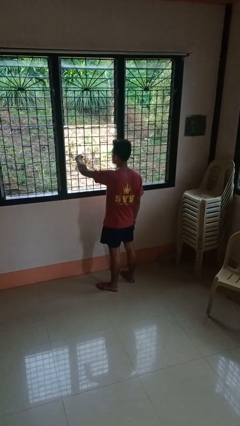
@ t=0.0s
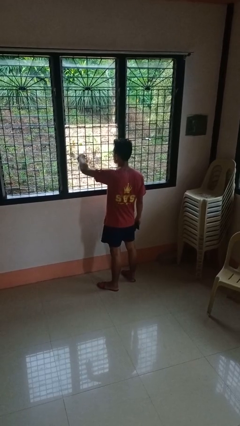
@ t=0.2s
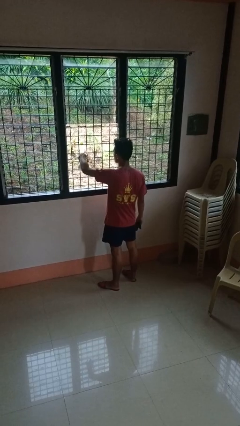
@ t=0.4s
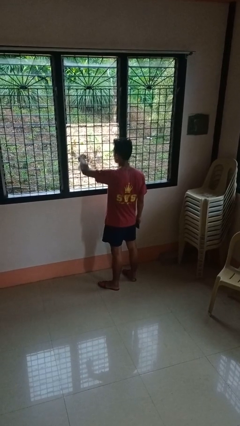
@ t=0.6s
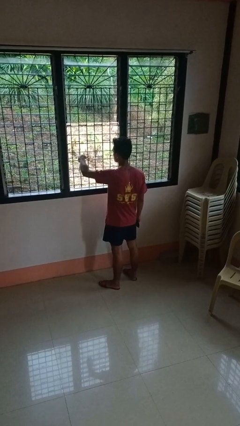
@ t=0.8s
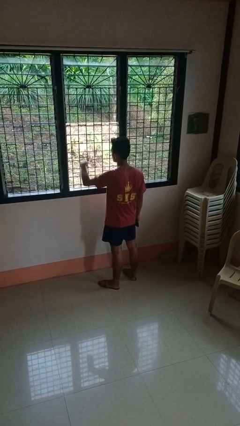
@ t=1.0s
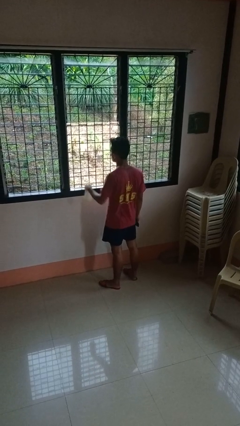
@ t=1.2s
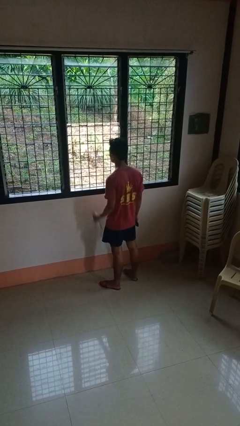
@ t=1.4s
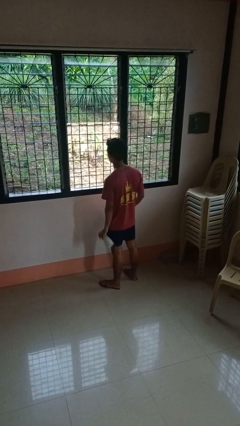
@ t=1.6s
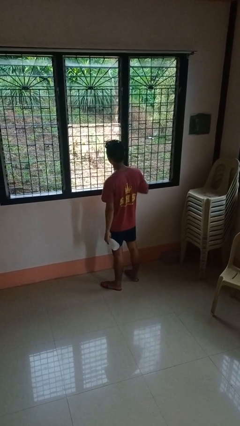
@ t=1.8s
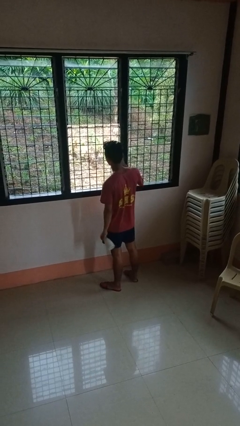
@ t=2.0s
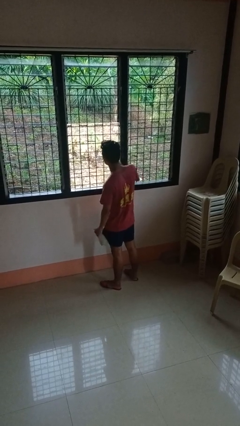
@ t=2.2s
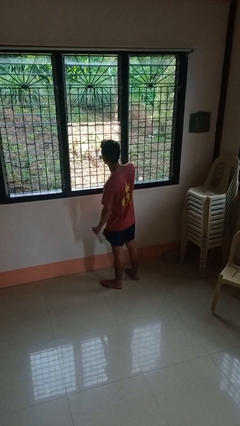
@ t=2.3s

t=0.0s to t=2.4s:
person sprays from bottle

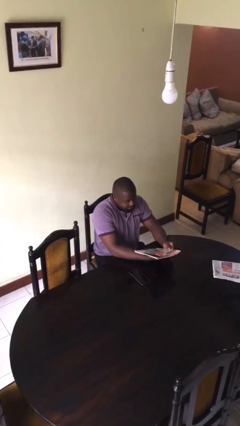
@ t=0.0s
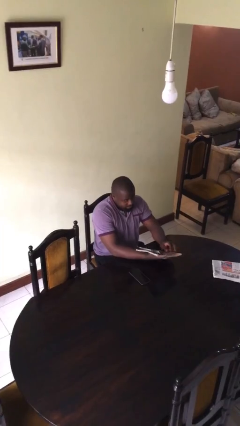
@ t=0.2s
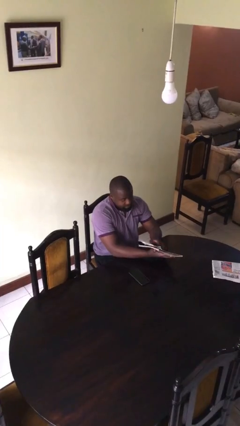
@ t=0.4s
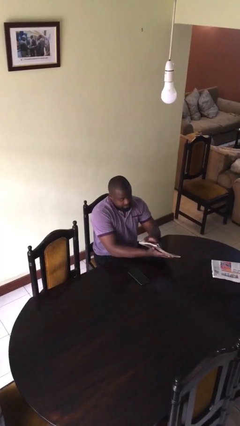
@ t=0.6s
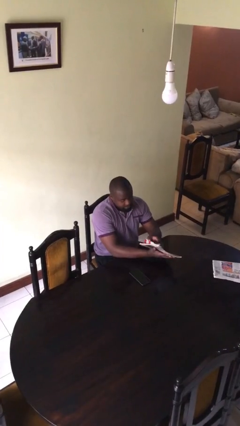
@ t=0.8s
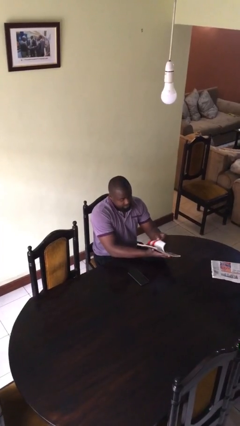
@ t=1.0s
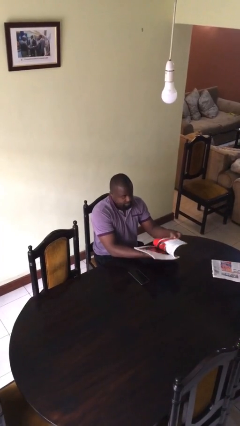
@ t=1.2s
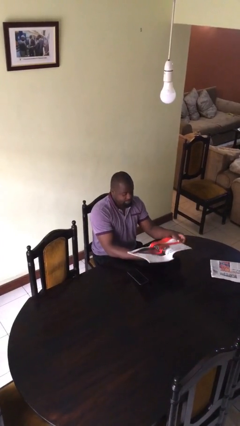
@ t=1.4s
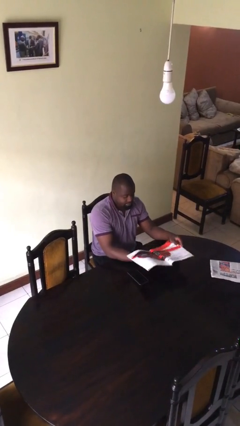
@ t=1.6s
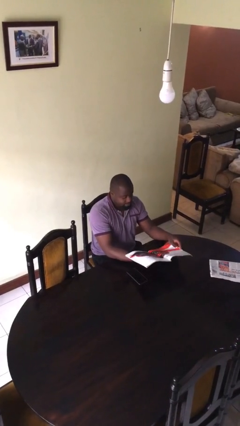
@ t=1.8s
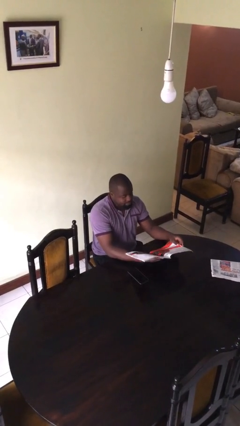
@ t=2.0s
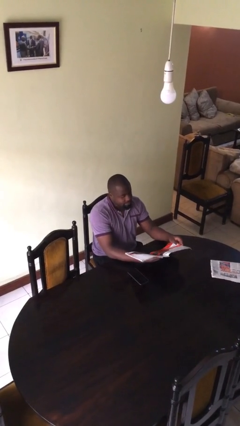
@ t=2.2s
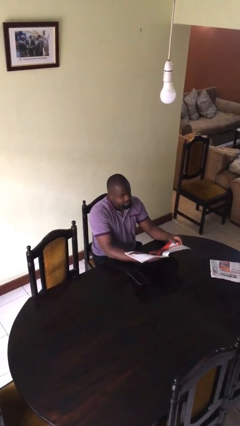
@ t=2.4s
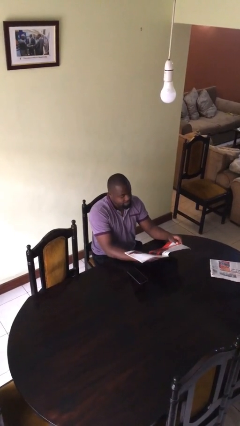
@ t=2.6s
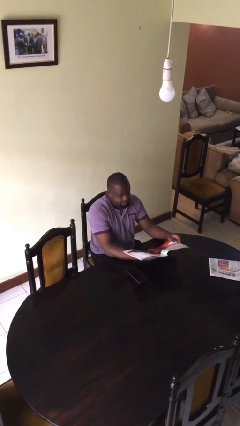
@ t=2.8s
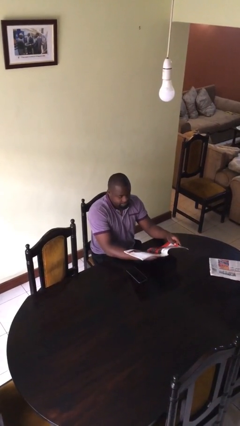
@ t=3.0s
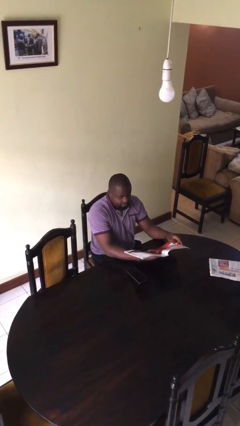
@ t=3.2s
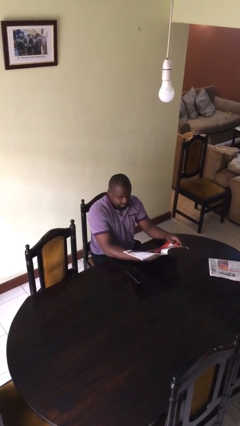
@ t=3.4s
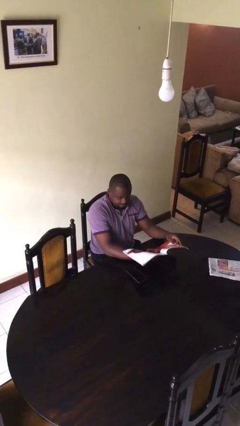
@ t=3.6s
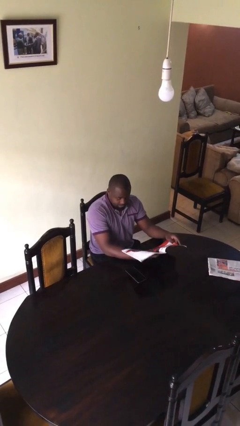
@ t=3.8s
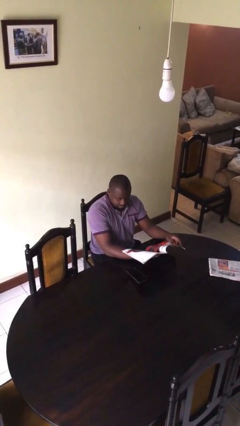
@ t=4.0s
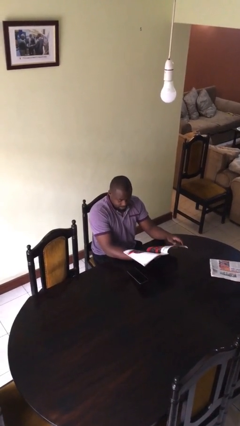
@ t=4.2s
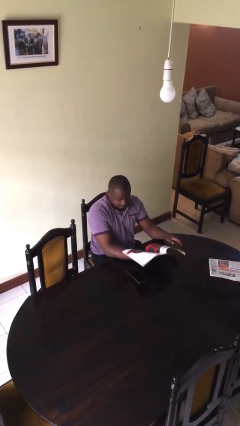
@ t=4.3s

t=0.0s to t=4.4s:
person reads document

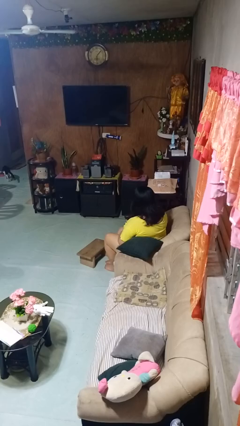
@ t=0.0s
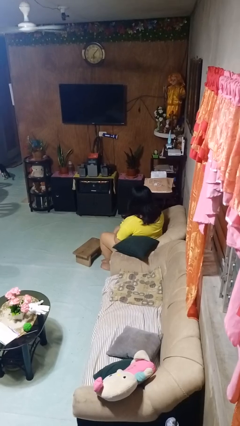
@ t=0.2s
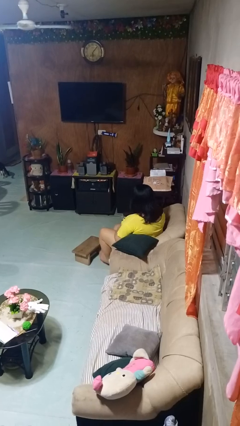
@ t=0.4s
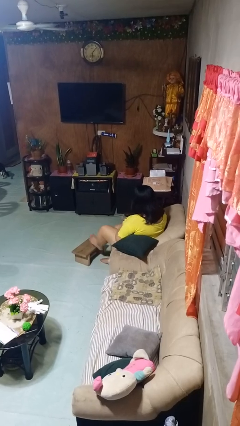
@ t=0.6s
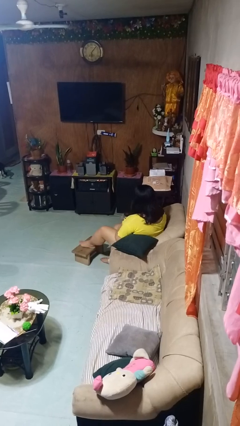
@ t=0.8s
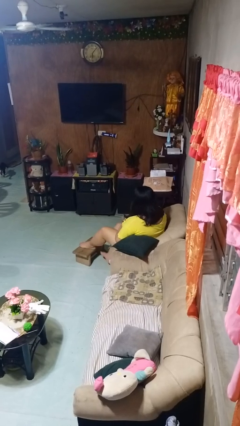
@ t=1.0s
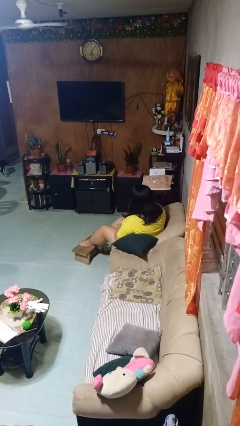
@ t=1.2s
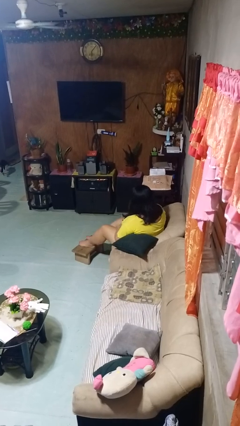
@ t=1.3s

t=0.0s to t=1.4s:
person puts feet up

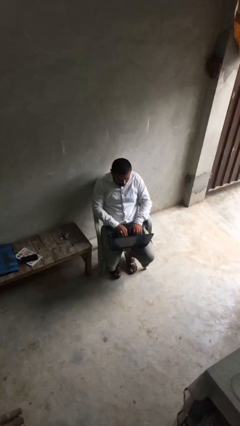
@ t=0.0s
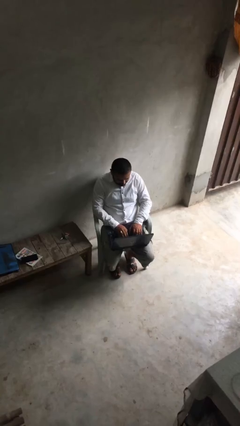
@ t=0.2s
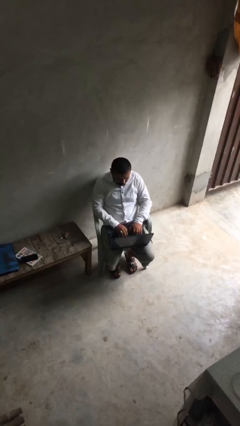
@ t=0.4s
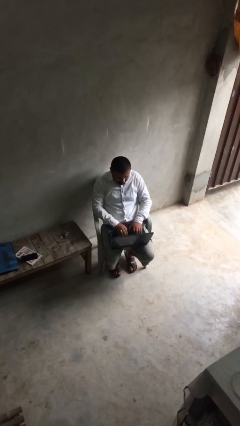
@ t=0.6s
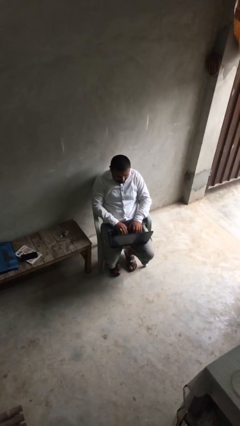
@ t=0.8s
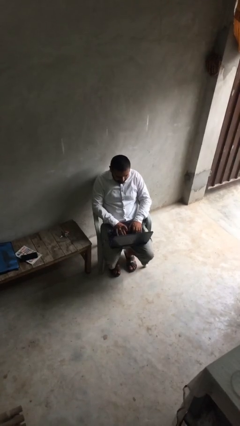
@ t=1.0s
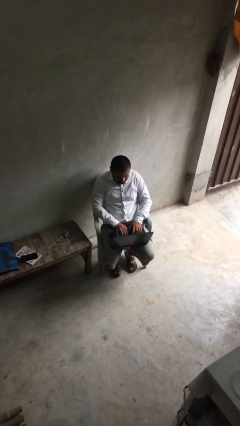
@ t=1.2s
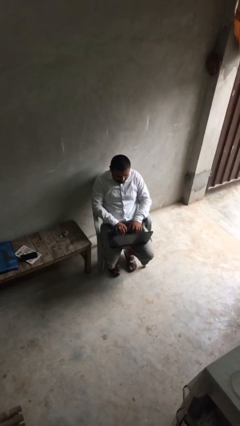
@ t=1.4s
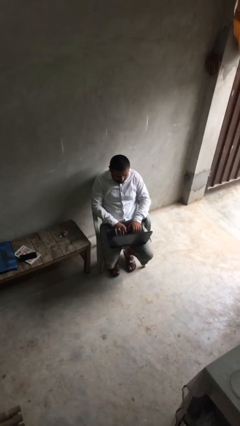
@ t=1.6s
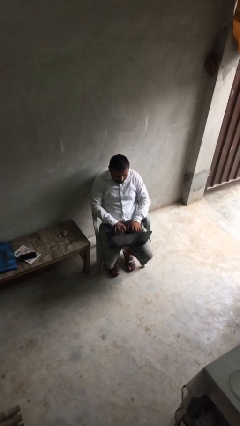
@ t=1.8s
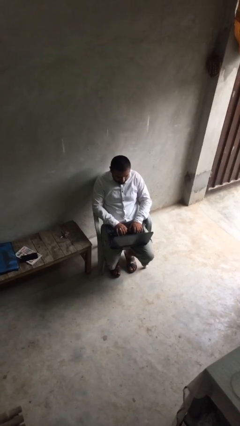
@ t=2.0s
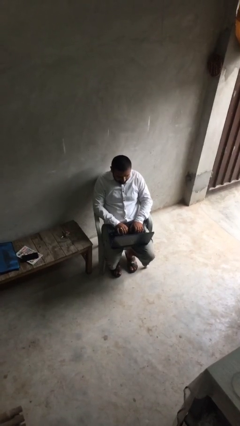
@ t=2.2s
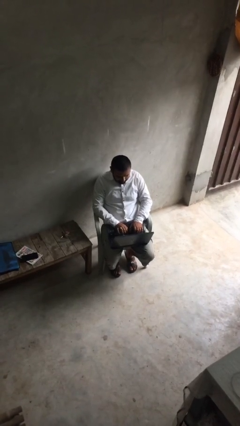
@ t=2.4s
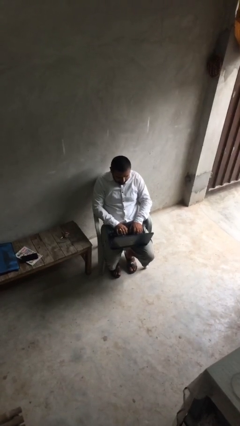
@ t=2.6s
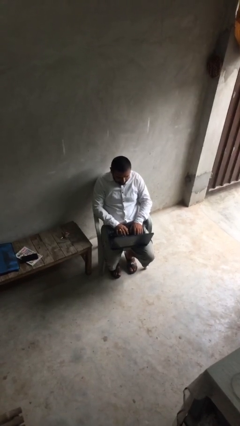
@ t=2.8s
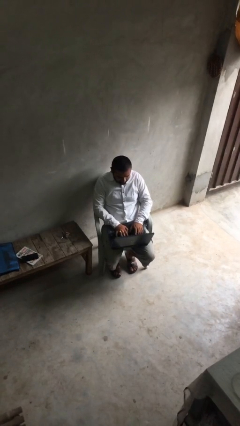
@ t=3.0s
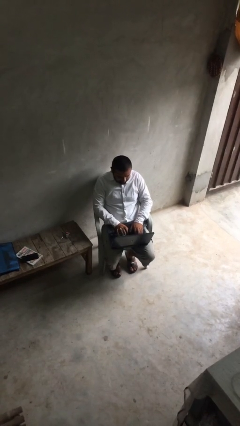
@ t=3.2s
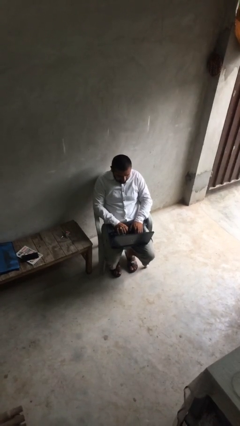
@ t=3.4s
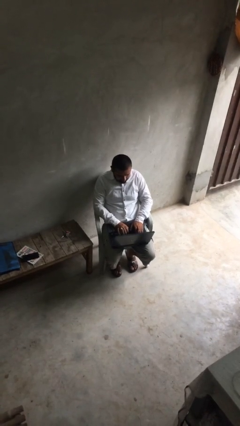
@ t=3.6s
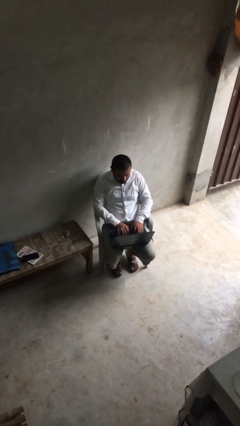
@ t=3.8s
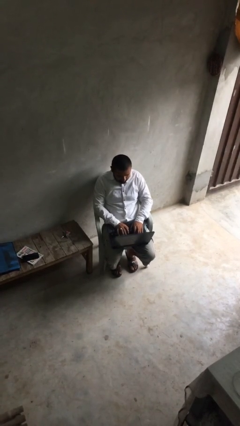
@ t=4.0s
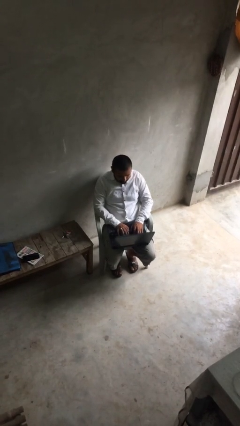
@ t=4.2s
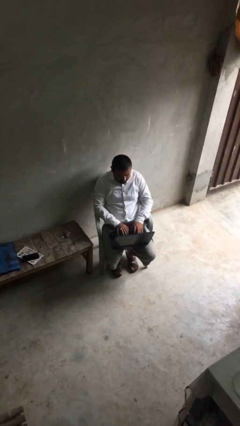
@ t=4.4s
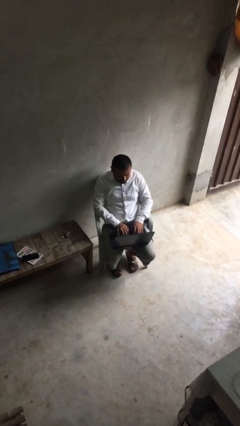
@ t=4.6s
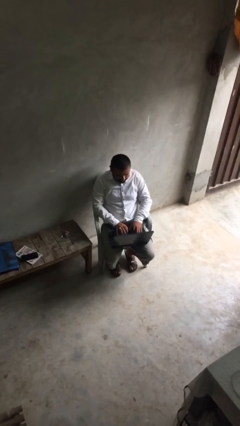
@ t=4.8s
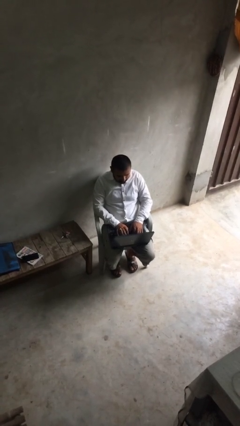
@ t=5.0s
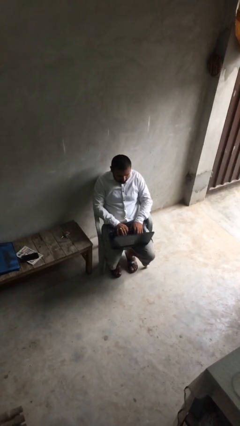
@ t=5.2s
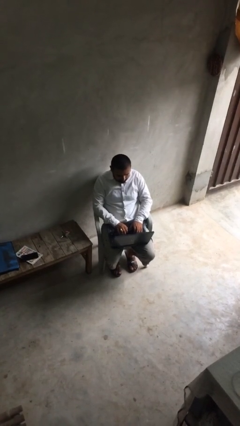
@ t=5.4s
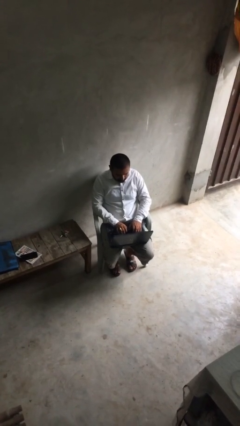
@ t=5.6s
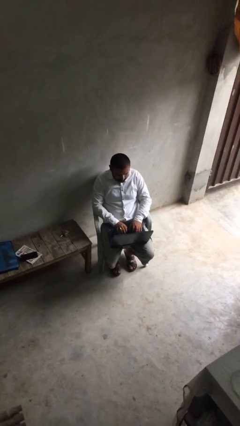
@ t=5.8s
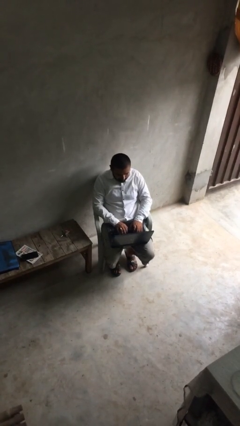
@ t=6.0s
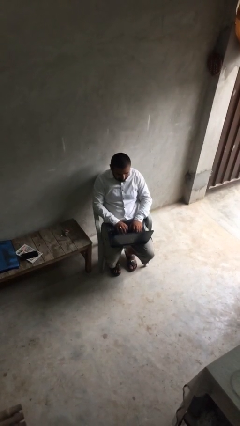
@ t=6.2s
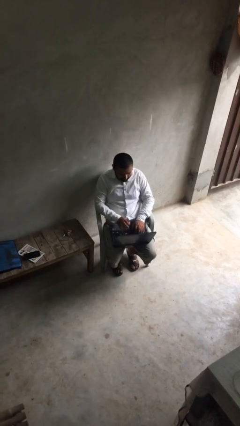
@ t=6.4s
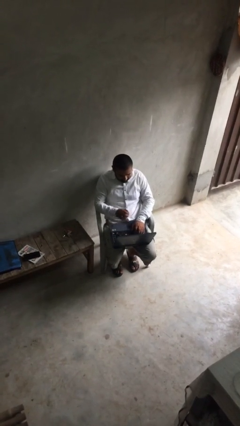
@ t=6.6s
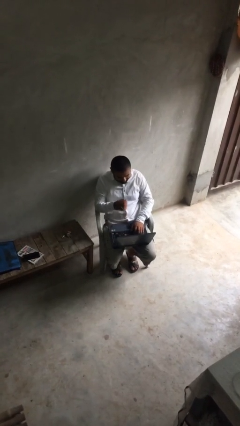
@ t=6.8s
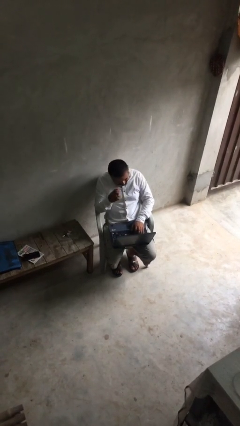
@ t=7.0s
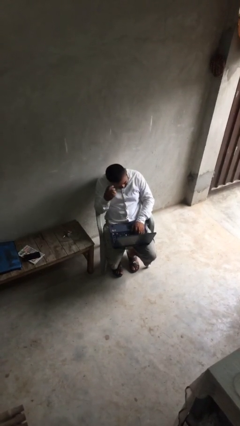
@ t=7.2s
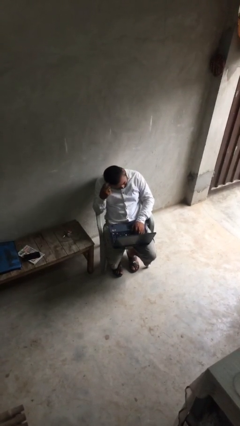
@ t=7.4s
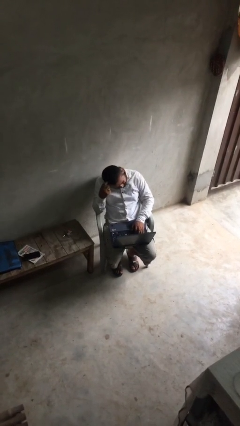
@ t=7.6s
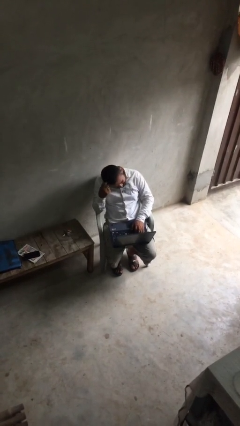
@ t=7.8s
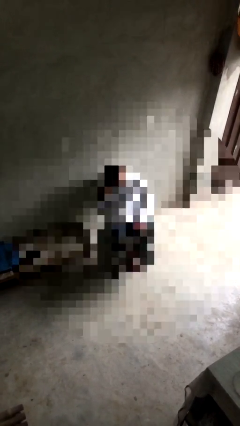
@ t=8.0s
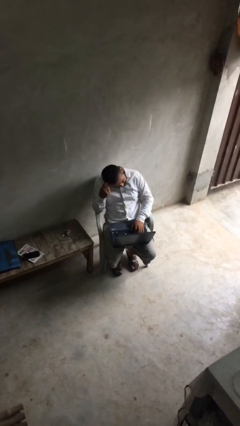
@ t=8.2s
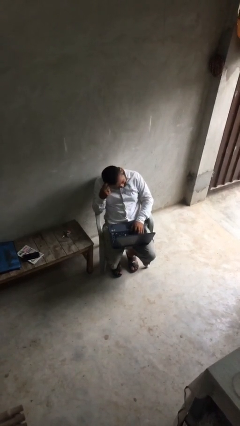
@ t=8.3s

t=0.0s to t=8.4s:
person interacts with laptop

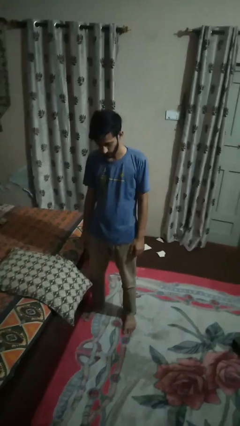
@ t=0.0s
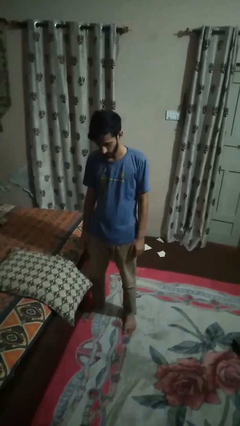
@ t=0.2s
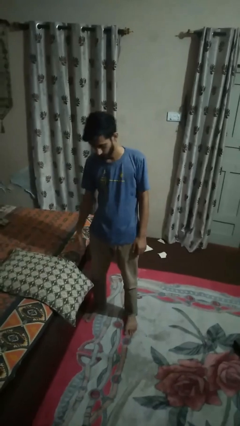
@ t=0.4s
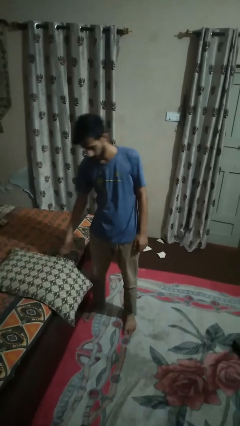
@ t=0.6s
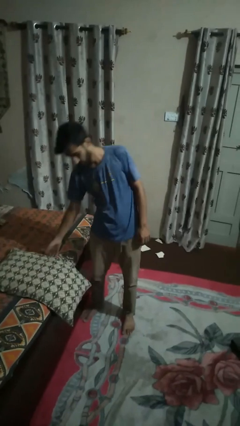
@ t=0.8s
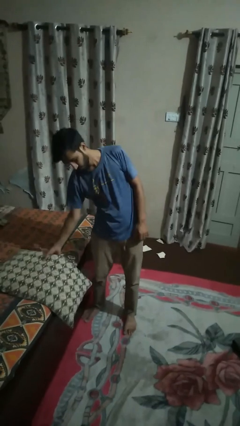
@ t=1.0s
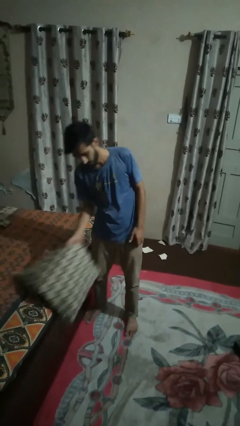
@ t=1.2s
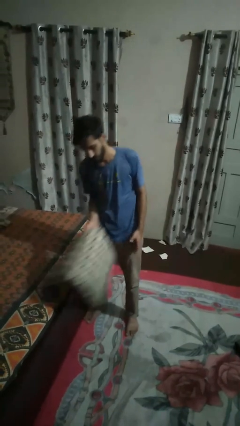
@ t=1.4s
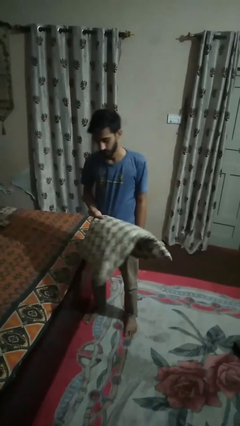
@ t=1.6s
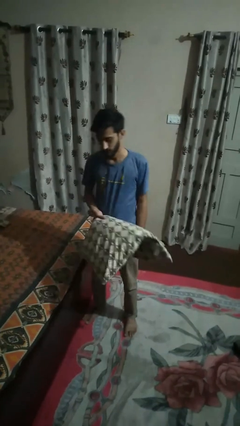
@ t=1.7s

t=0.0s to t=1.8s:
person picks up object from bed
